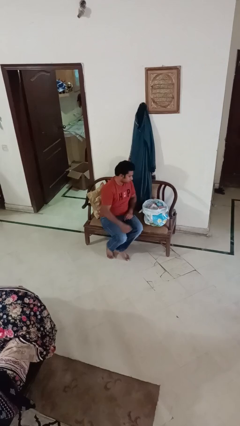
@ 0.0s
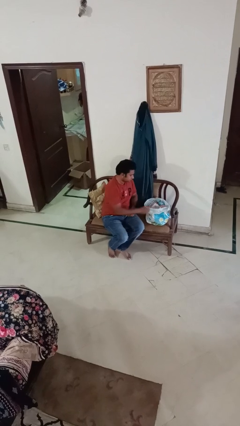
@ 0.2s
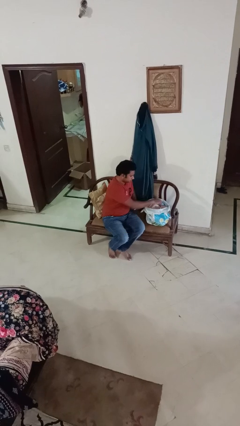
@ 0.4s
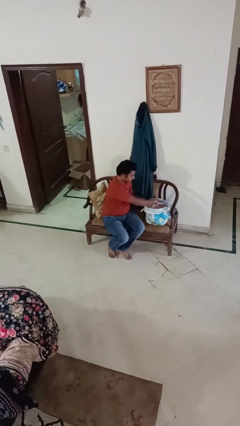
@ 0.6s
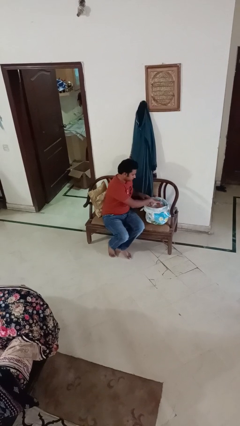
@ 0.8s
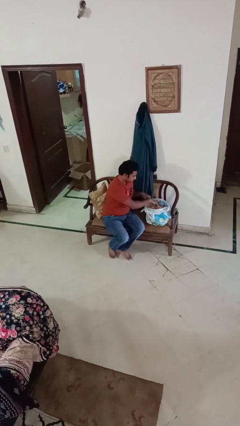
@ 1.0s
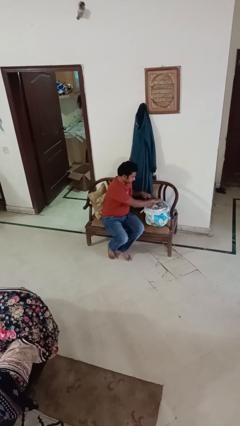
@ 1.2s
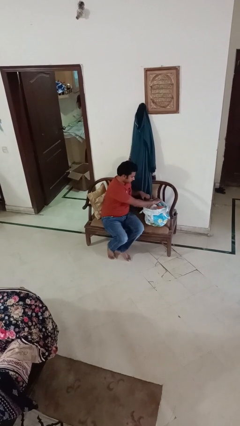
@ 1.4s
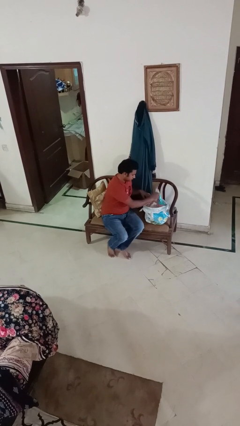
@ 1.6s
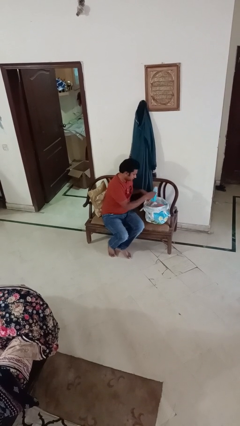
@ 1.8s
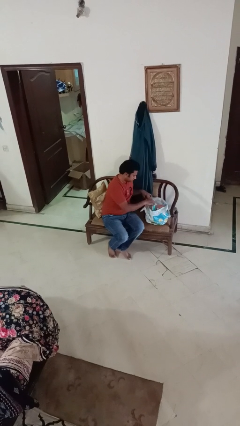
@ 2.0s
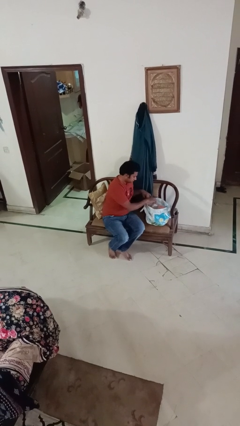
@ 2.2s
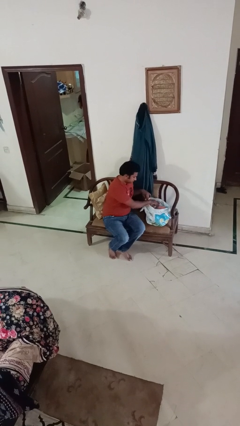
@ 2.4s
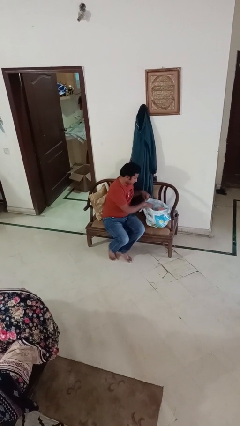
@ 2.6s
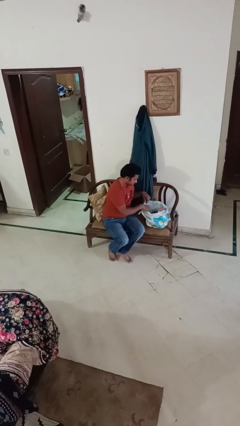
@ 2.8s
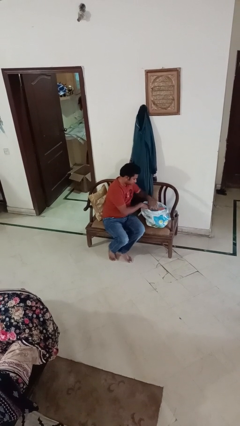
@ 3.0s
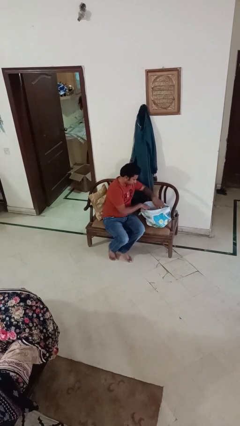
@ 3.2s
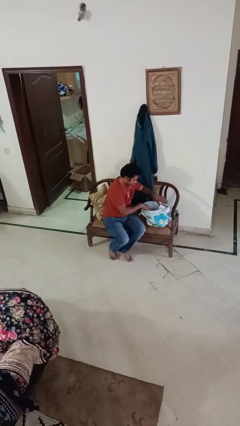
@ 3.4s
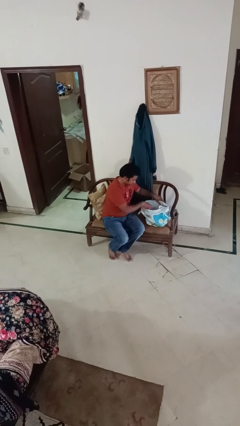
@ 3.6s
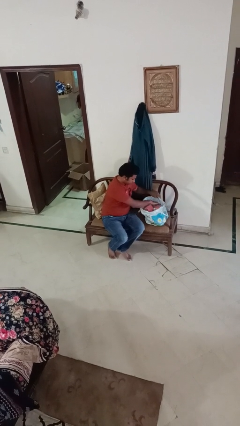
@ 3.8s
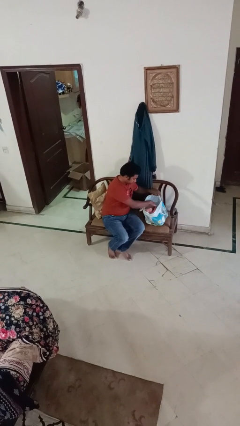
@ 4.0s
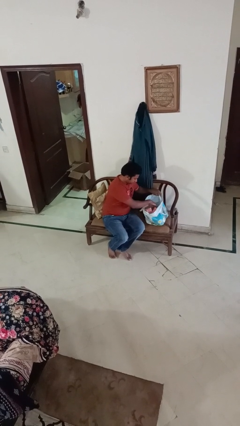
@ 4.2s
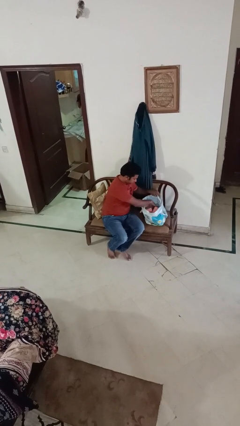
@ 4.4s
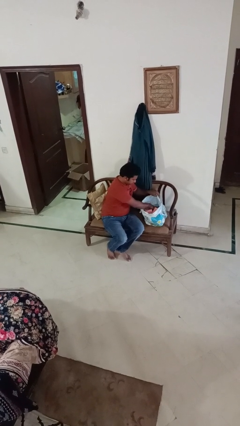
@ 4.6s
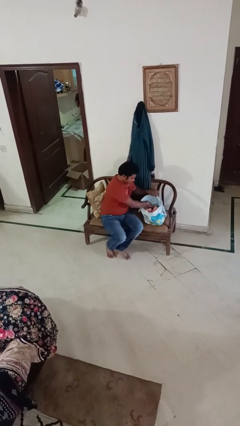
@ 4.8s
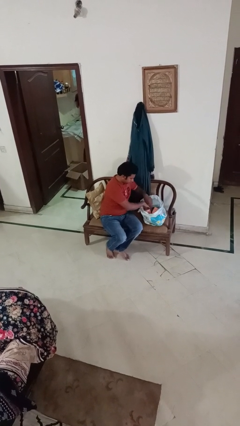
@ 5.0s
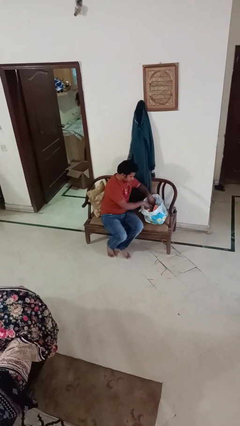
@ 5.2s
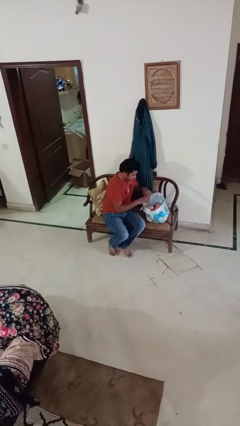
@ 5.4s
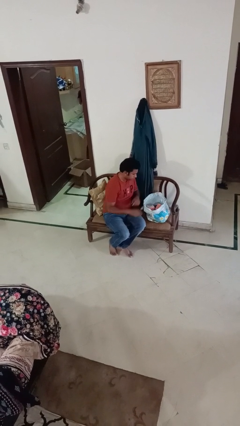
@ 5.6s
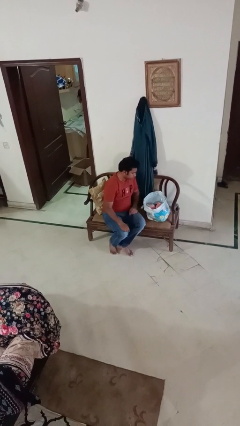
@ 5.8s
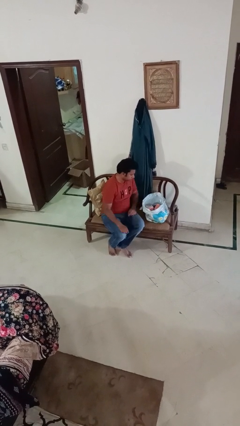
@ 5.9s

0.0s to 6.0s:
person searches in bag

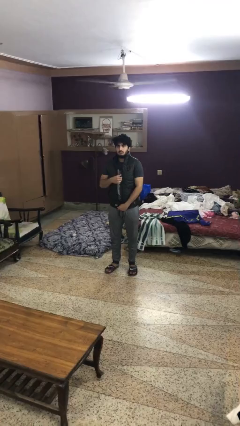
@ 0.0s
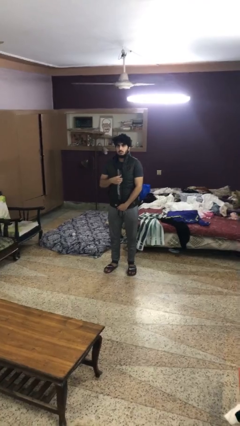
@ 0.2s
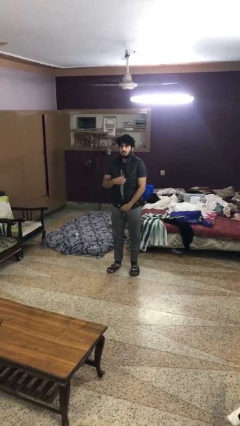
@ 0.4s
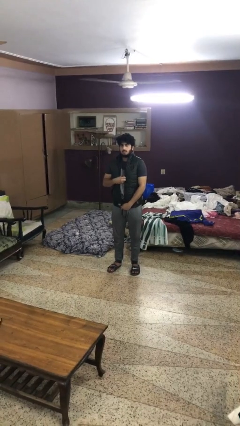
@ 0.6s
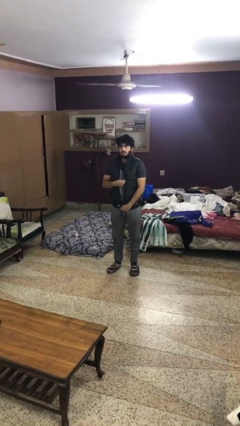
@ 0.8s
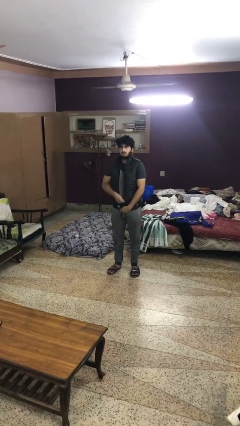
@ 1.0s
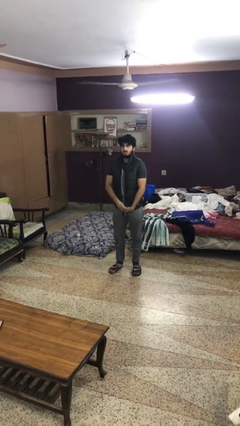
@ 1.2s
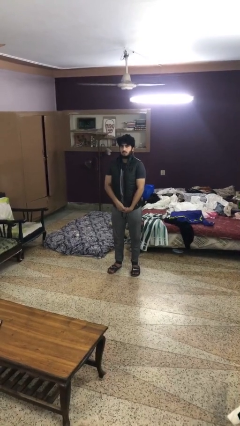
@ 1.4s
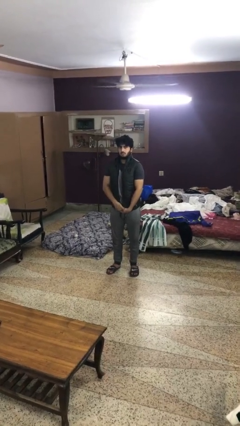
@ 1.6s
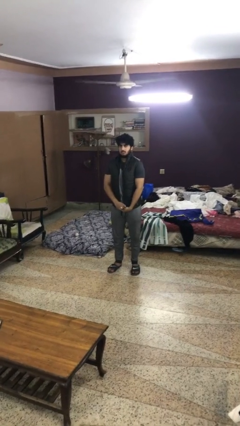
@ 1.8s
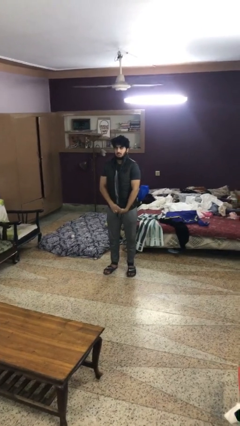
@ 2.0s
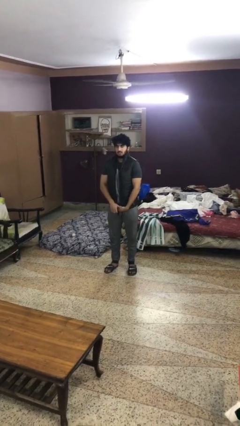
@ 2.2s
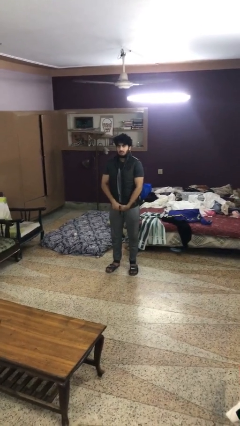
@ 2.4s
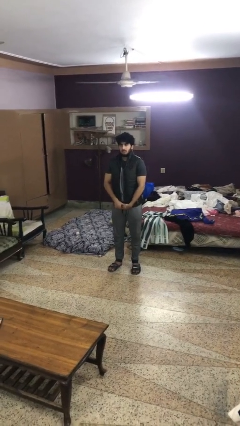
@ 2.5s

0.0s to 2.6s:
person unzips jacket

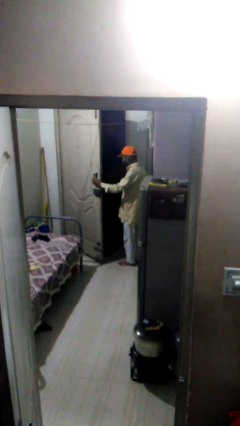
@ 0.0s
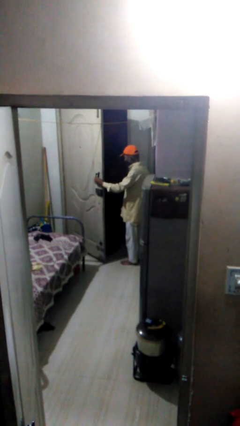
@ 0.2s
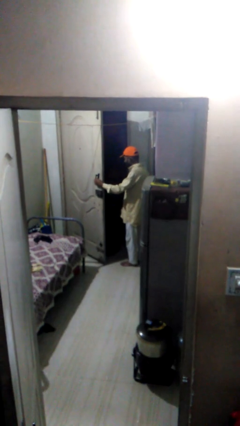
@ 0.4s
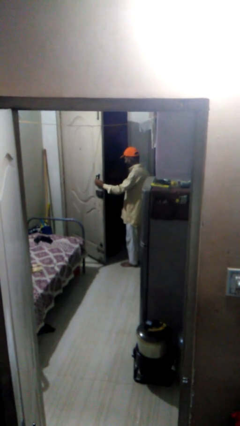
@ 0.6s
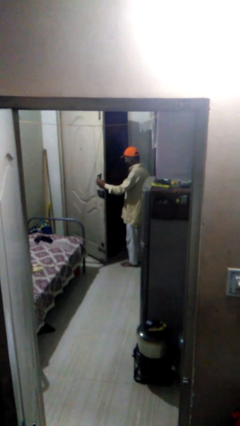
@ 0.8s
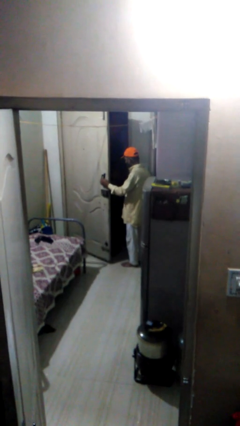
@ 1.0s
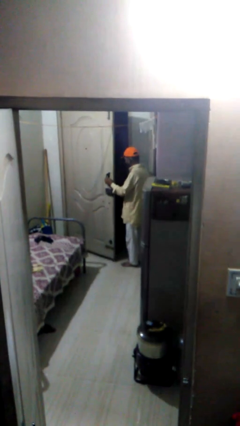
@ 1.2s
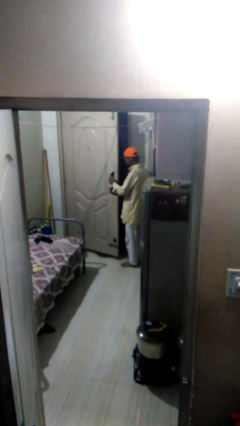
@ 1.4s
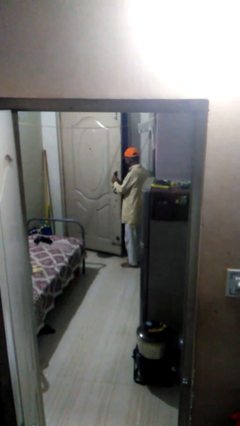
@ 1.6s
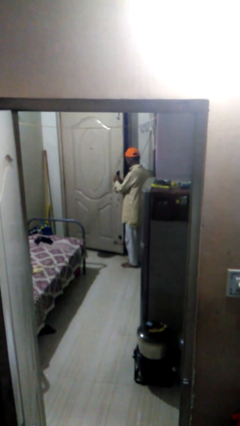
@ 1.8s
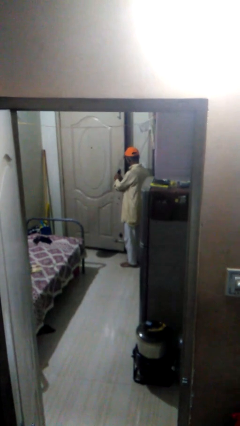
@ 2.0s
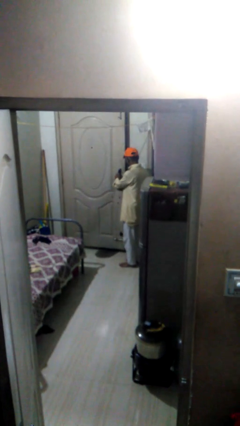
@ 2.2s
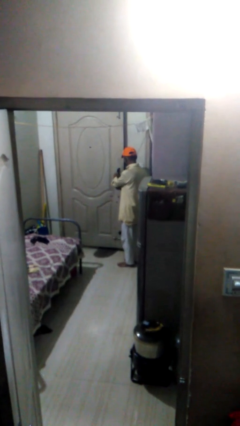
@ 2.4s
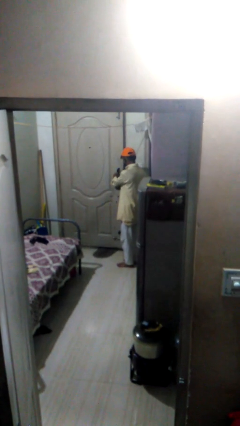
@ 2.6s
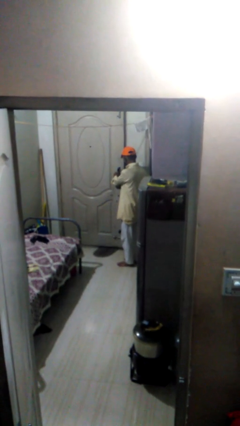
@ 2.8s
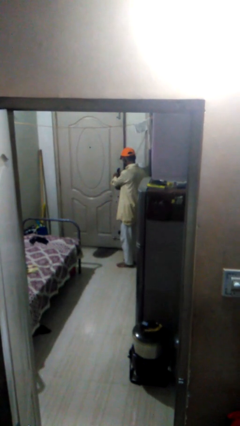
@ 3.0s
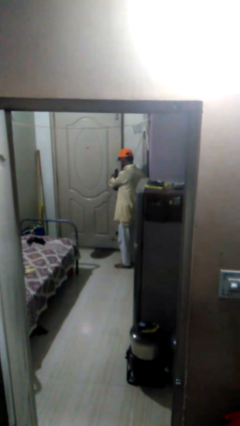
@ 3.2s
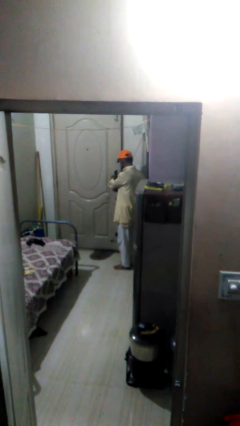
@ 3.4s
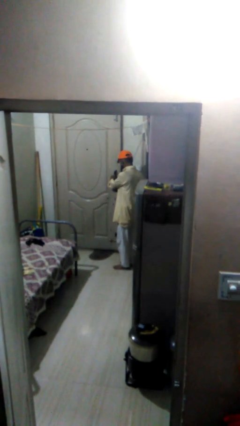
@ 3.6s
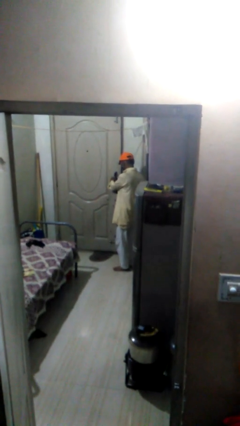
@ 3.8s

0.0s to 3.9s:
person closes facility door

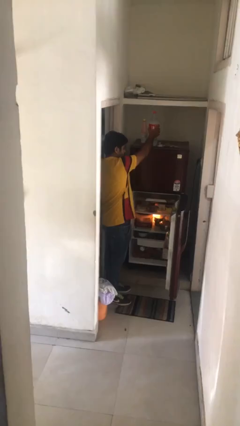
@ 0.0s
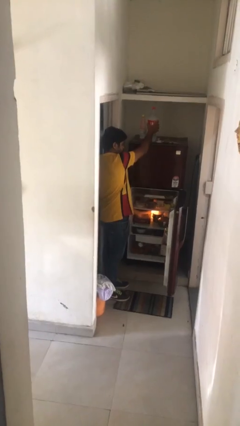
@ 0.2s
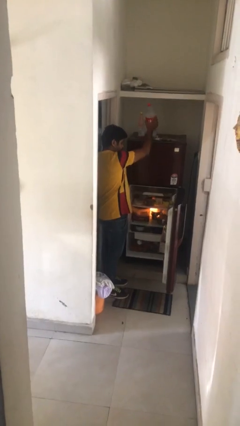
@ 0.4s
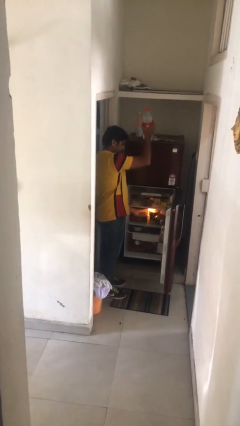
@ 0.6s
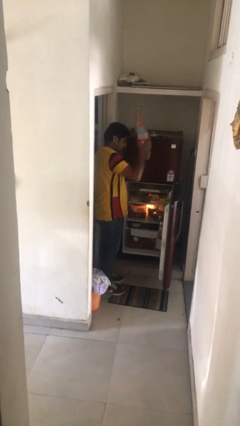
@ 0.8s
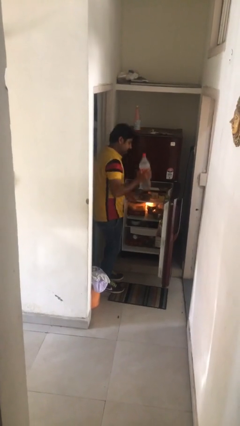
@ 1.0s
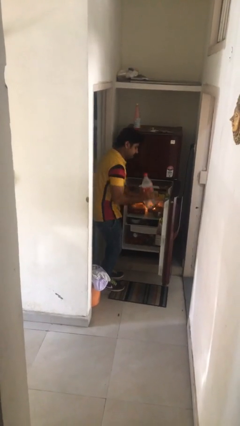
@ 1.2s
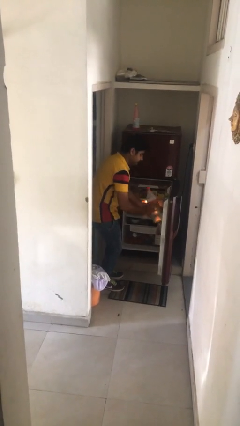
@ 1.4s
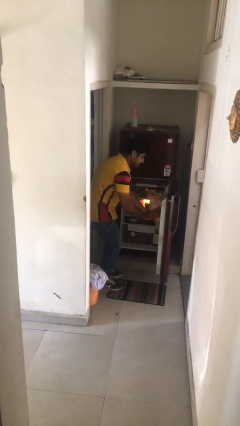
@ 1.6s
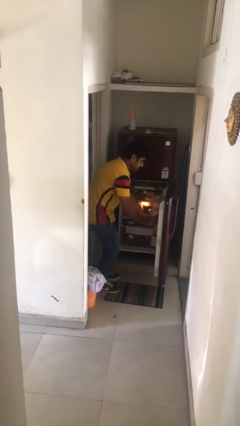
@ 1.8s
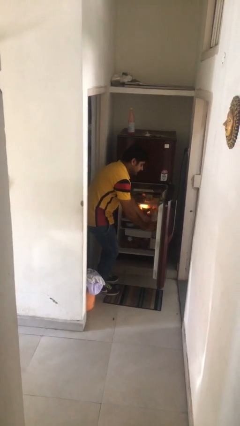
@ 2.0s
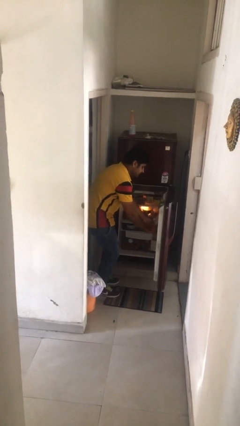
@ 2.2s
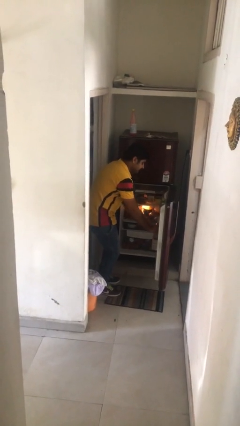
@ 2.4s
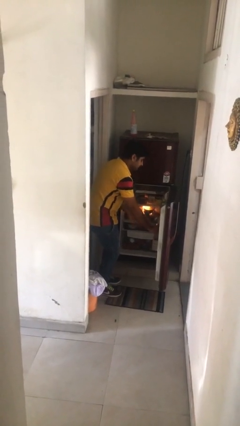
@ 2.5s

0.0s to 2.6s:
person loads groceries into refrigerator

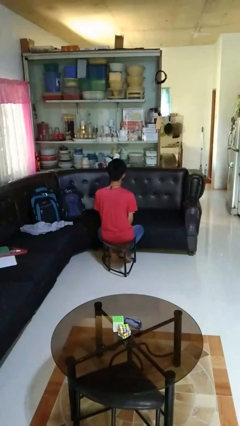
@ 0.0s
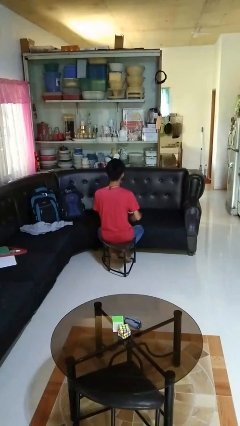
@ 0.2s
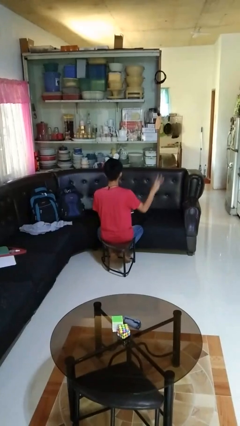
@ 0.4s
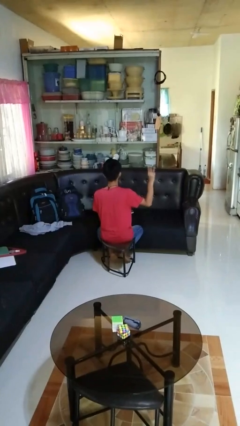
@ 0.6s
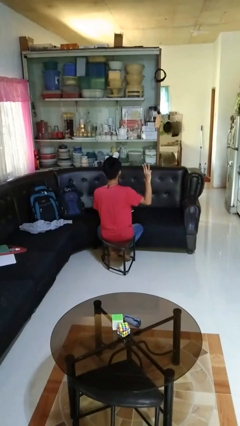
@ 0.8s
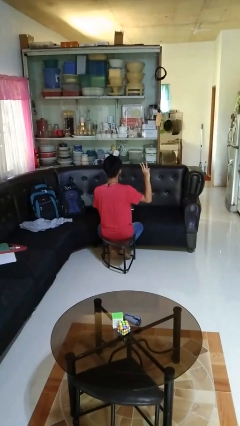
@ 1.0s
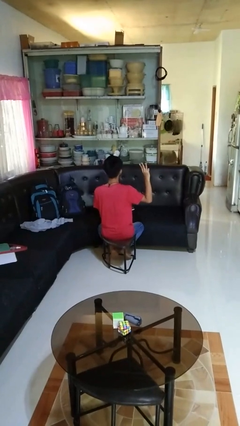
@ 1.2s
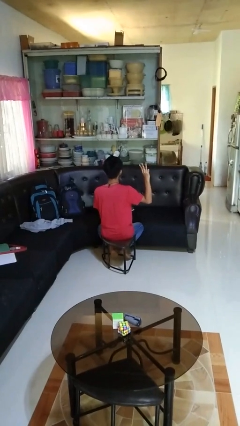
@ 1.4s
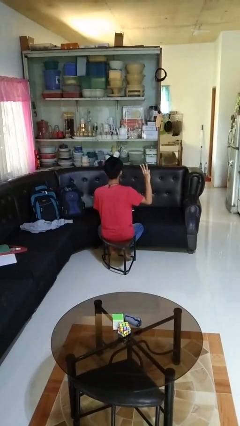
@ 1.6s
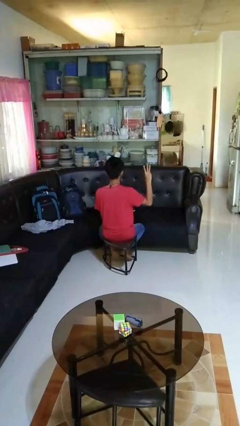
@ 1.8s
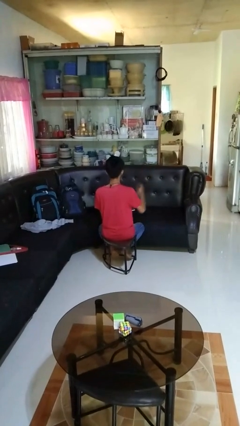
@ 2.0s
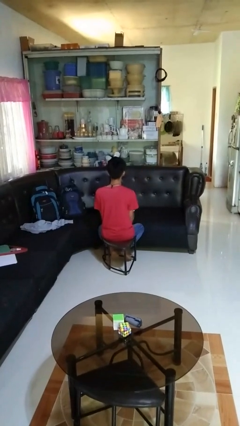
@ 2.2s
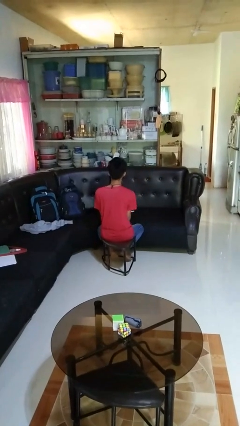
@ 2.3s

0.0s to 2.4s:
person gestures number three
